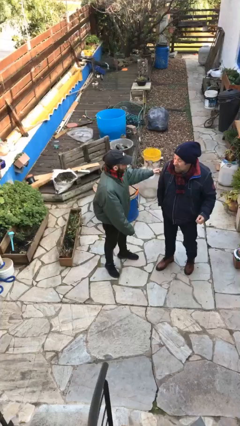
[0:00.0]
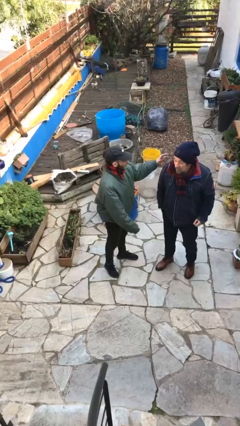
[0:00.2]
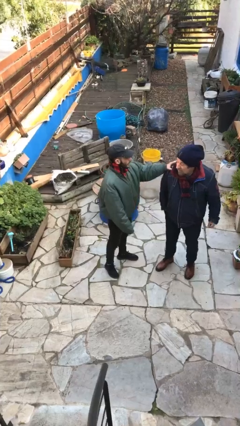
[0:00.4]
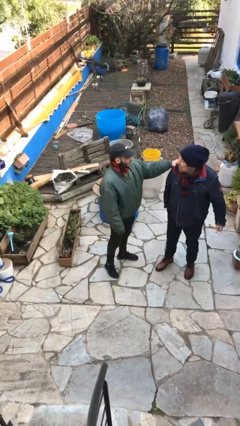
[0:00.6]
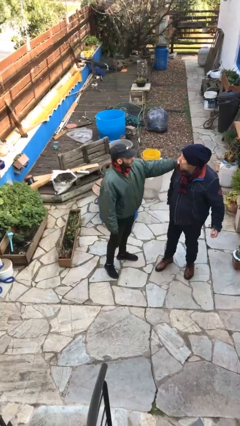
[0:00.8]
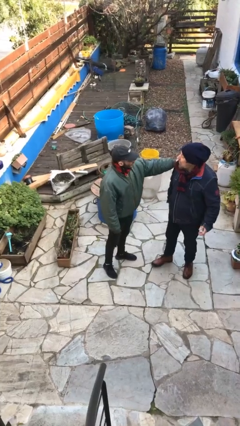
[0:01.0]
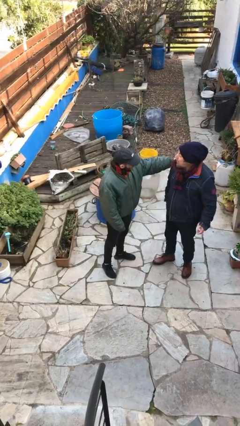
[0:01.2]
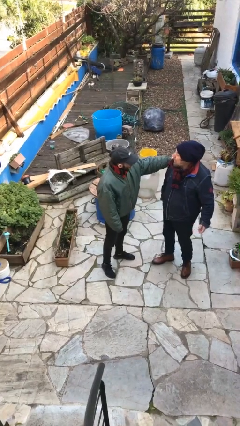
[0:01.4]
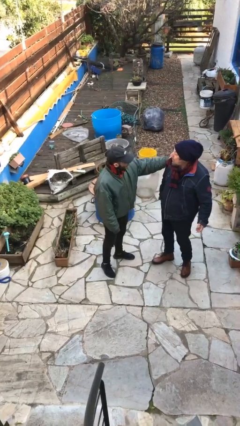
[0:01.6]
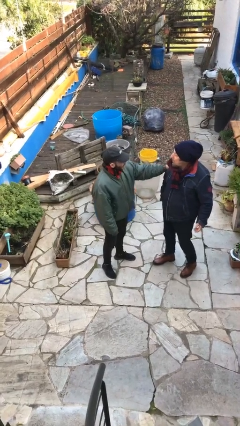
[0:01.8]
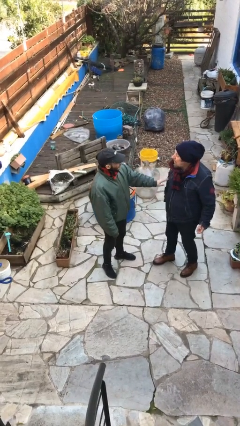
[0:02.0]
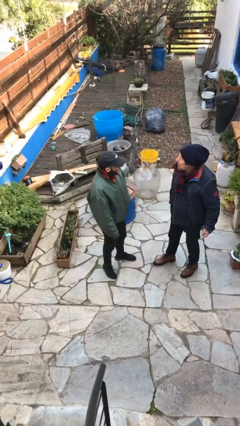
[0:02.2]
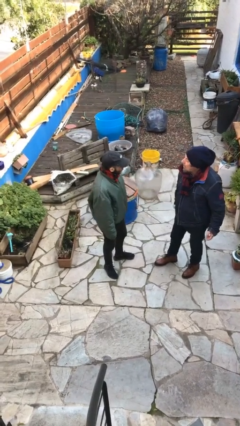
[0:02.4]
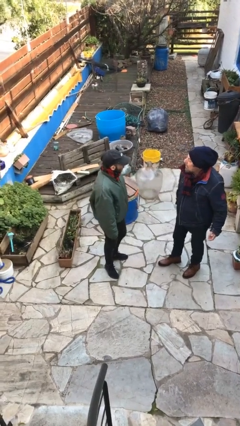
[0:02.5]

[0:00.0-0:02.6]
person pounds shoulders of person

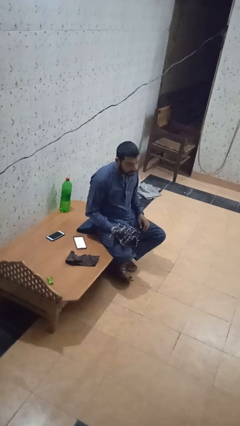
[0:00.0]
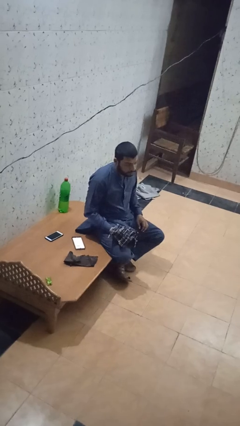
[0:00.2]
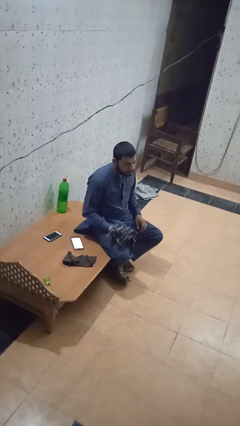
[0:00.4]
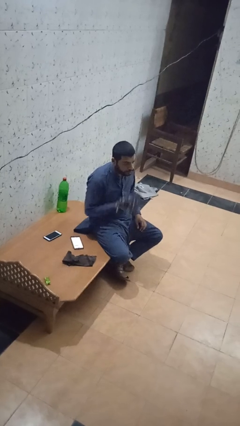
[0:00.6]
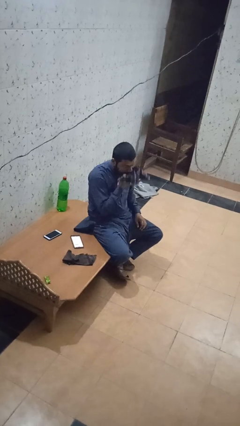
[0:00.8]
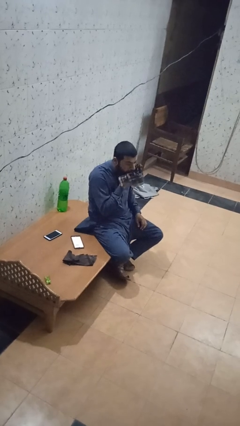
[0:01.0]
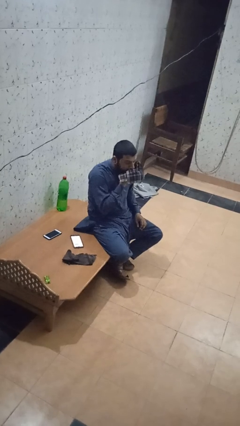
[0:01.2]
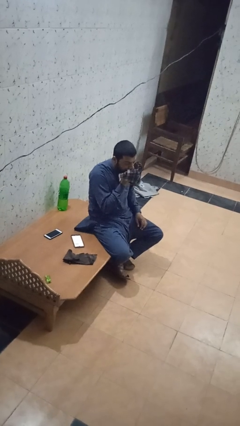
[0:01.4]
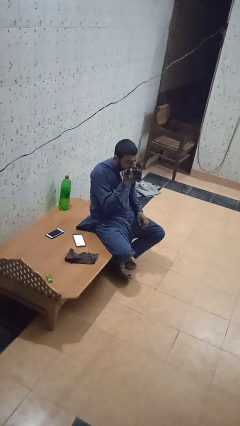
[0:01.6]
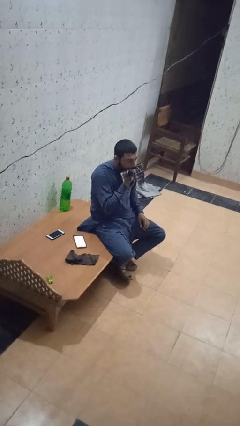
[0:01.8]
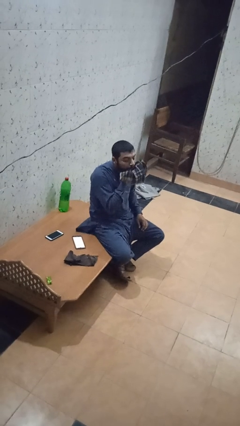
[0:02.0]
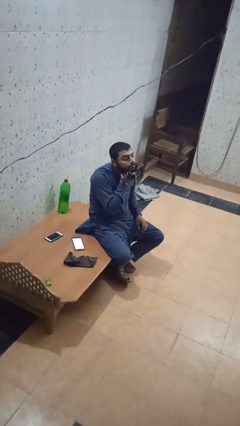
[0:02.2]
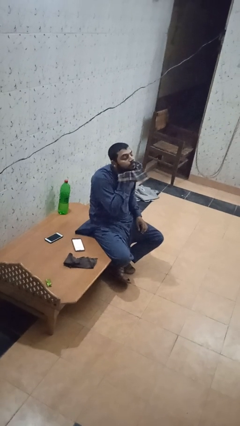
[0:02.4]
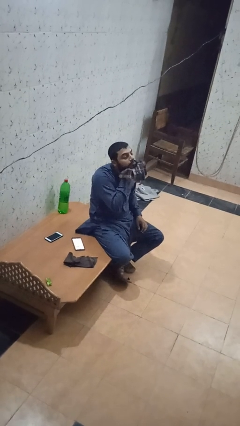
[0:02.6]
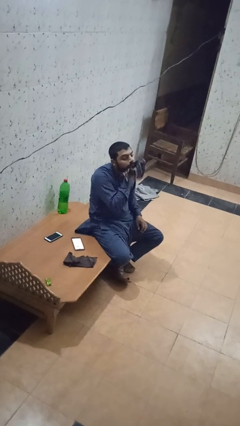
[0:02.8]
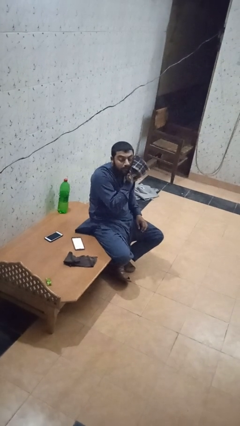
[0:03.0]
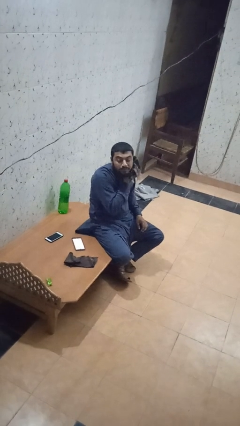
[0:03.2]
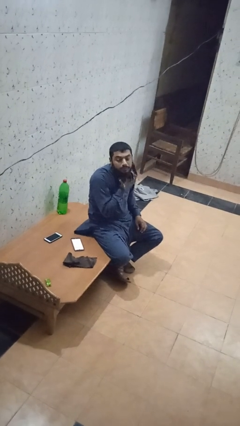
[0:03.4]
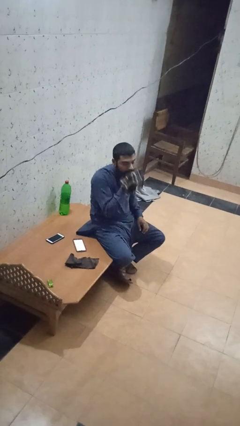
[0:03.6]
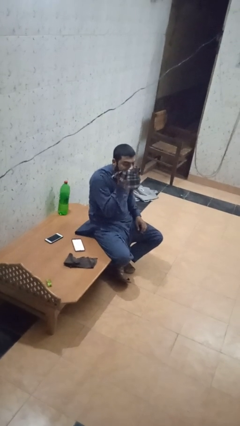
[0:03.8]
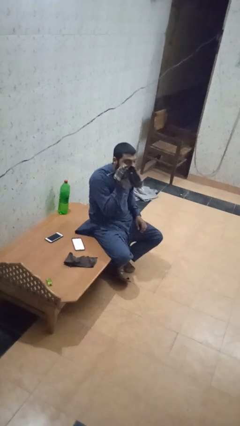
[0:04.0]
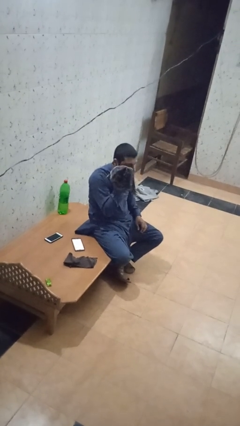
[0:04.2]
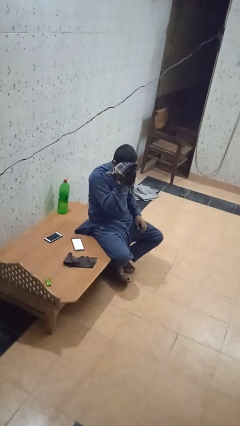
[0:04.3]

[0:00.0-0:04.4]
person wipes mouth with napkin

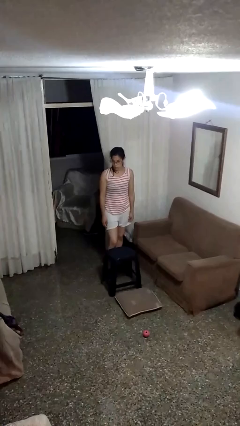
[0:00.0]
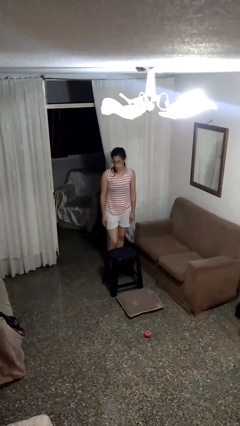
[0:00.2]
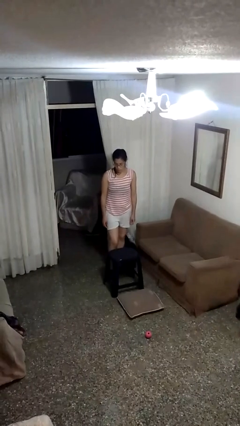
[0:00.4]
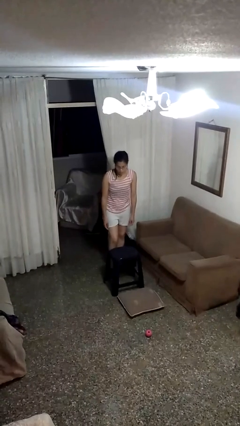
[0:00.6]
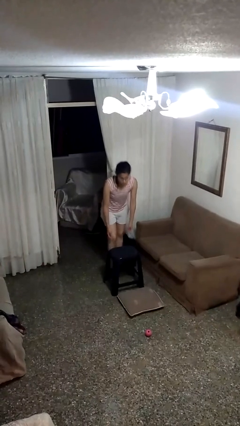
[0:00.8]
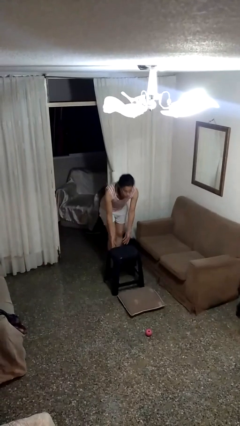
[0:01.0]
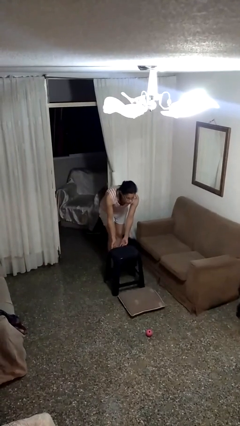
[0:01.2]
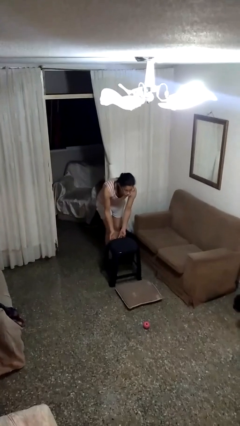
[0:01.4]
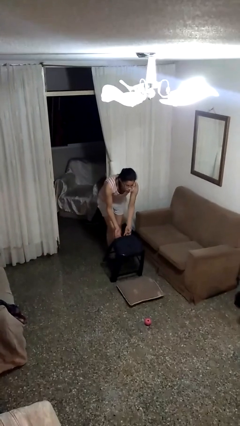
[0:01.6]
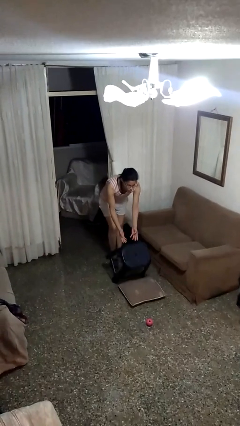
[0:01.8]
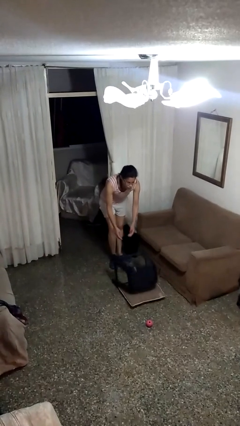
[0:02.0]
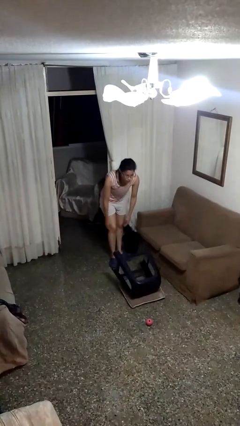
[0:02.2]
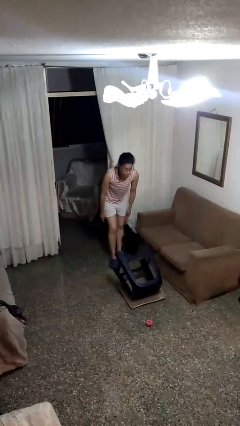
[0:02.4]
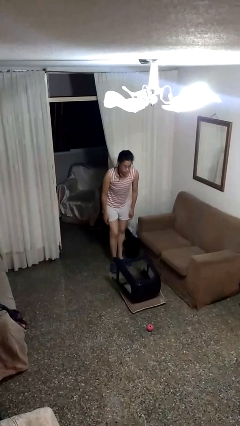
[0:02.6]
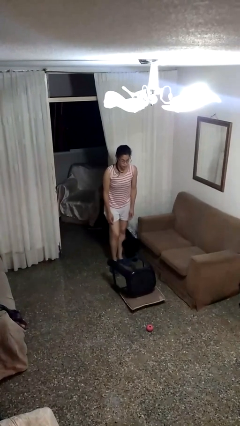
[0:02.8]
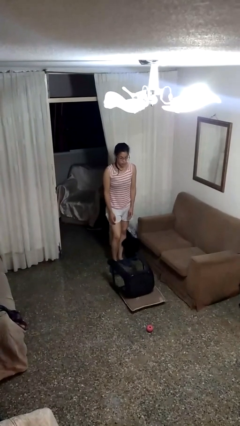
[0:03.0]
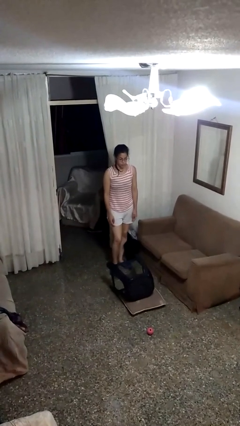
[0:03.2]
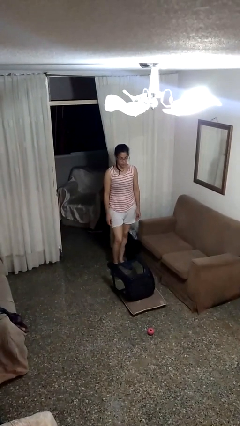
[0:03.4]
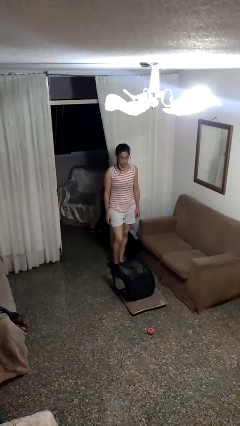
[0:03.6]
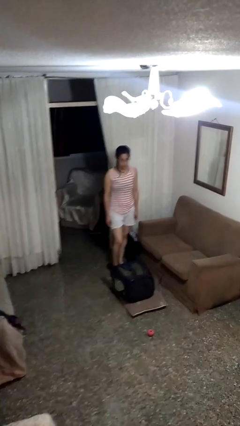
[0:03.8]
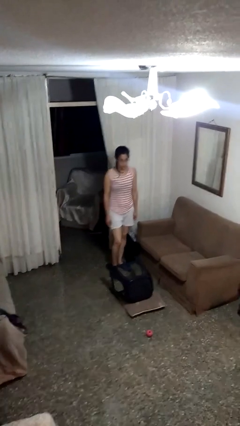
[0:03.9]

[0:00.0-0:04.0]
person knocks over furniture

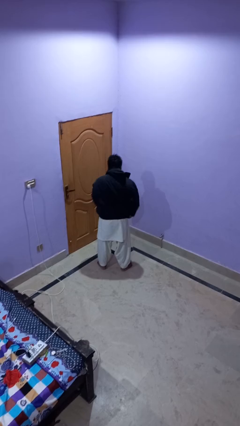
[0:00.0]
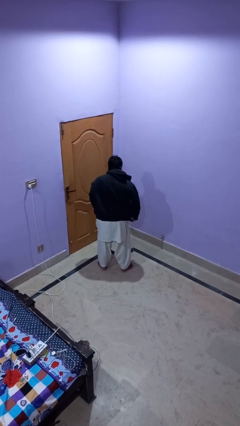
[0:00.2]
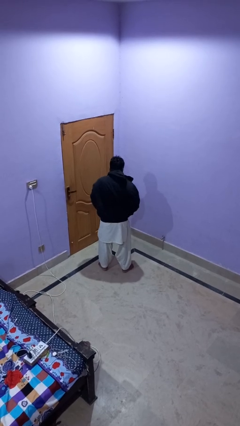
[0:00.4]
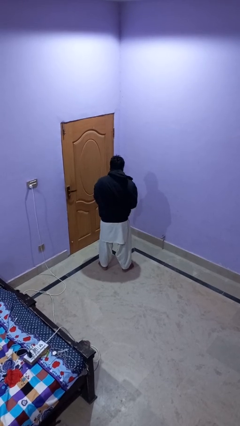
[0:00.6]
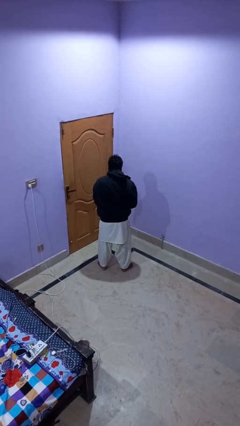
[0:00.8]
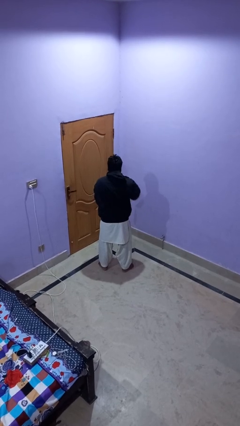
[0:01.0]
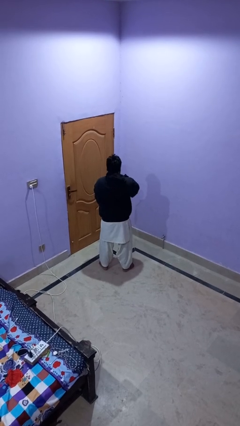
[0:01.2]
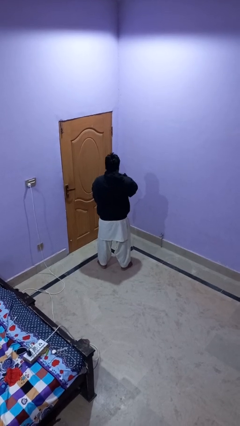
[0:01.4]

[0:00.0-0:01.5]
person zips up jacket

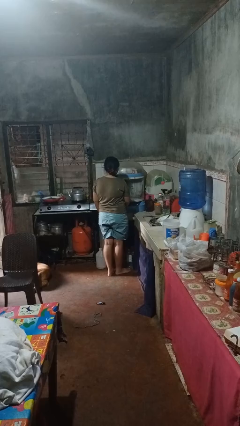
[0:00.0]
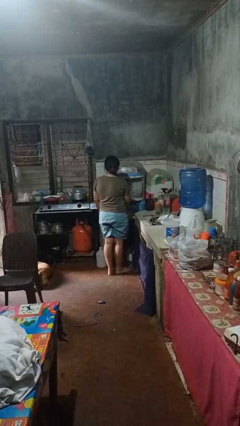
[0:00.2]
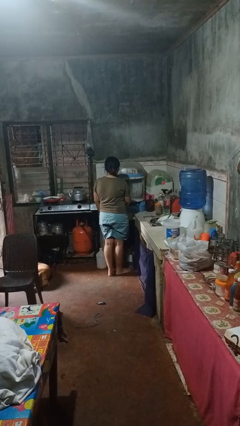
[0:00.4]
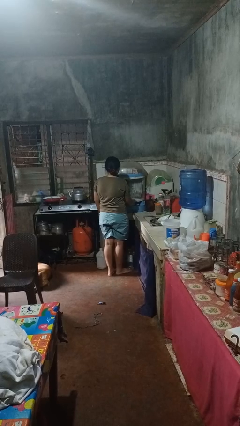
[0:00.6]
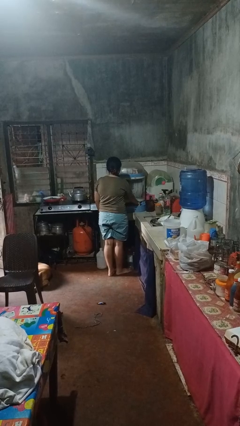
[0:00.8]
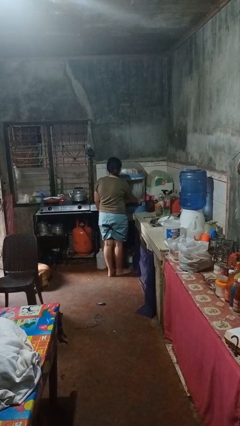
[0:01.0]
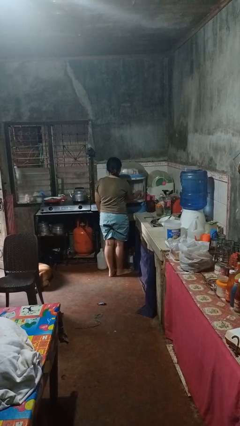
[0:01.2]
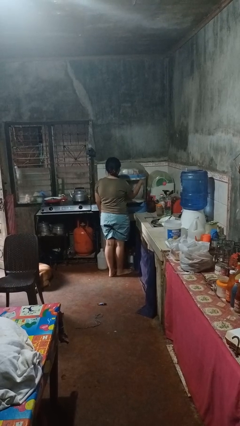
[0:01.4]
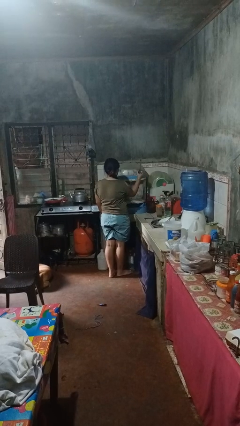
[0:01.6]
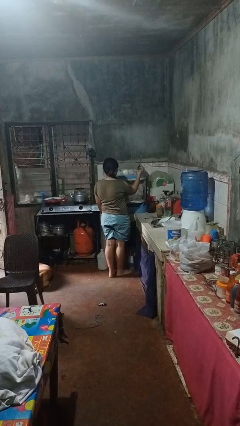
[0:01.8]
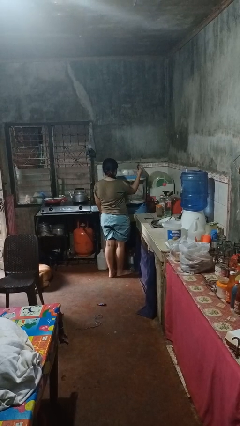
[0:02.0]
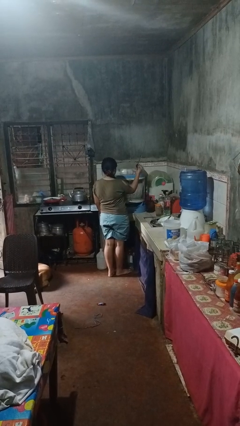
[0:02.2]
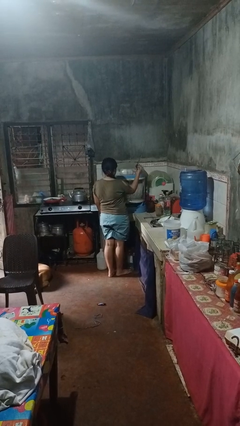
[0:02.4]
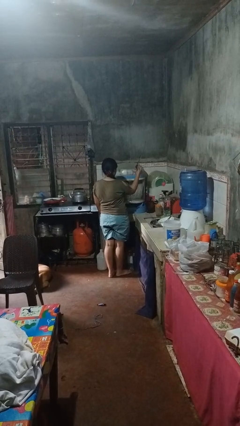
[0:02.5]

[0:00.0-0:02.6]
person takes object from kitchen drawer

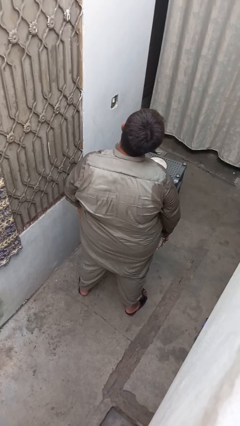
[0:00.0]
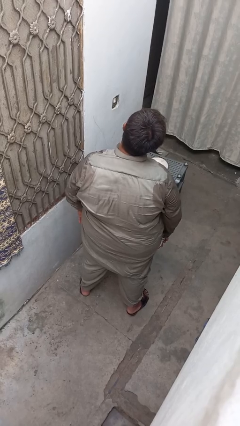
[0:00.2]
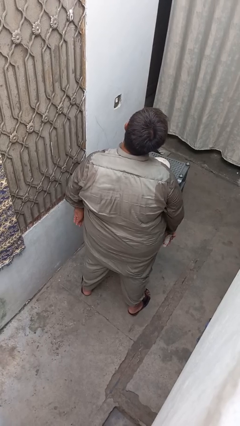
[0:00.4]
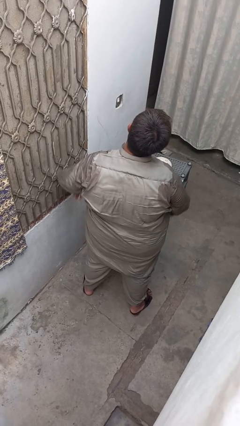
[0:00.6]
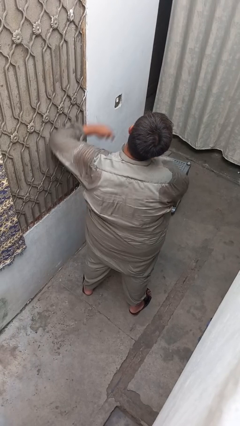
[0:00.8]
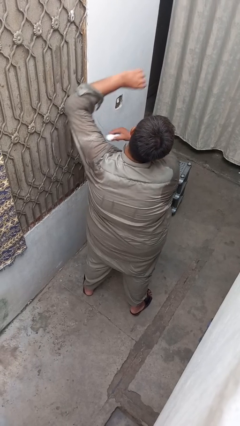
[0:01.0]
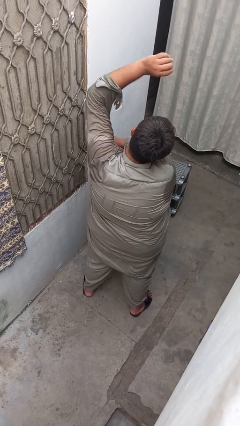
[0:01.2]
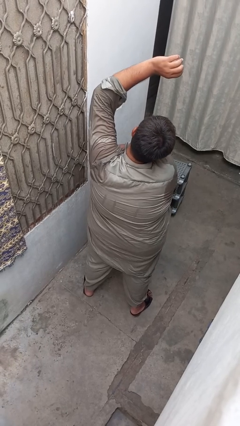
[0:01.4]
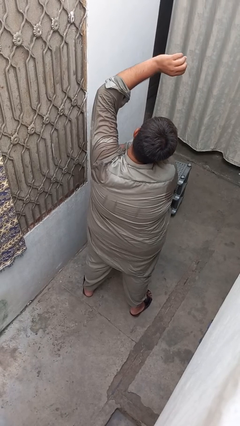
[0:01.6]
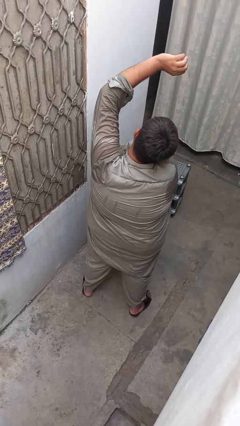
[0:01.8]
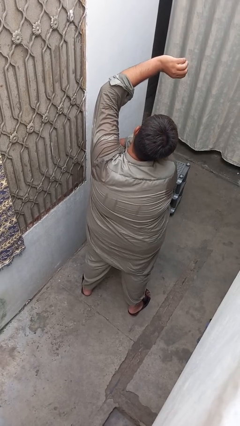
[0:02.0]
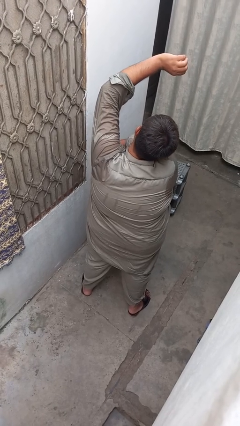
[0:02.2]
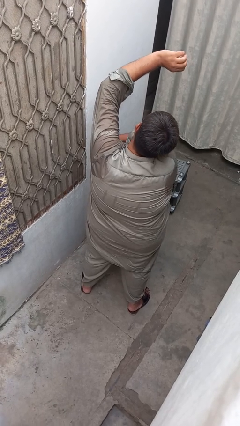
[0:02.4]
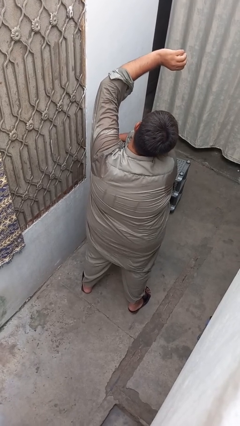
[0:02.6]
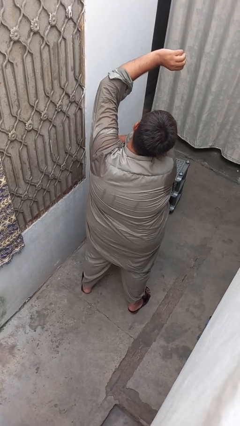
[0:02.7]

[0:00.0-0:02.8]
person applies deodorant
